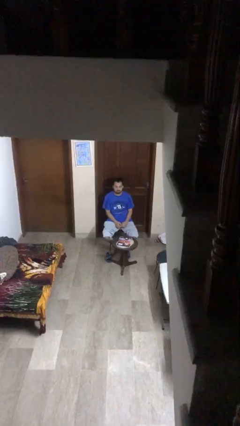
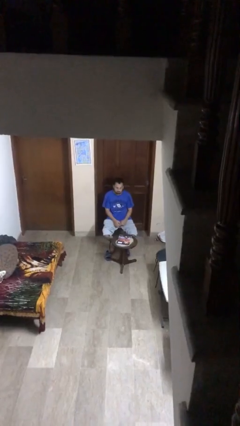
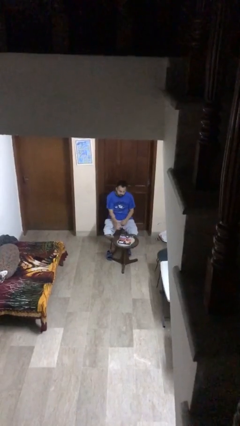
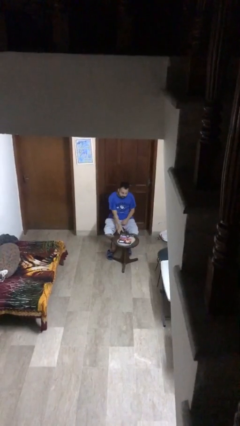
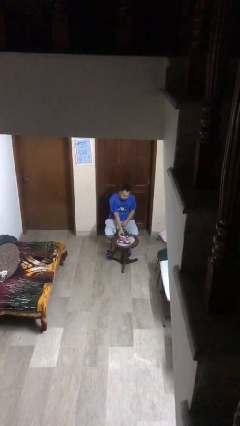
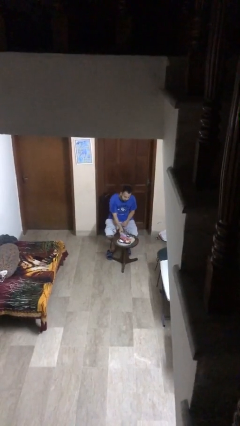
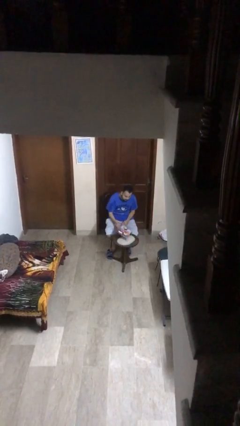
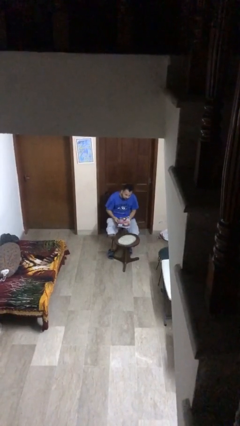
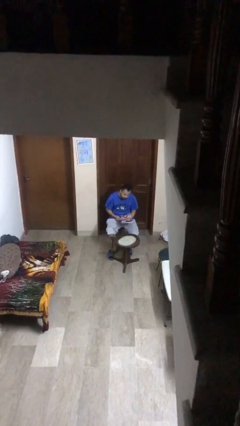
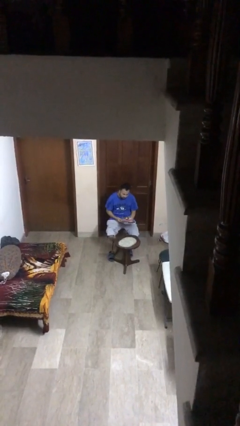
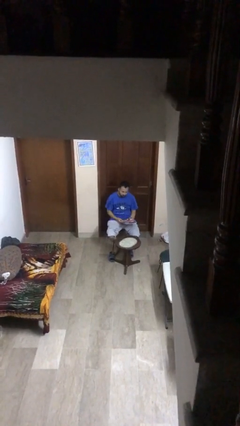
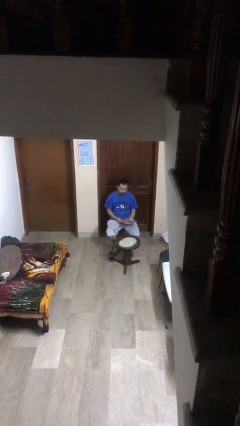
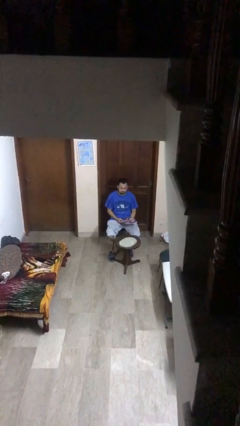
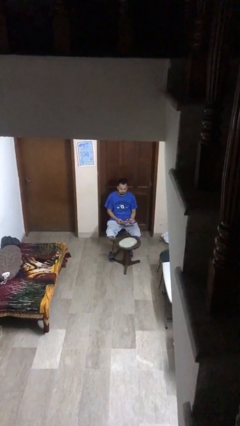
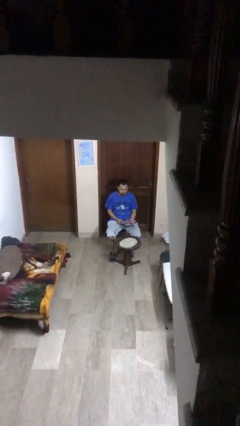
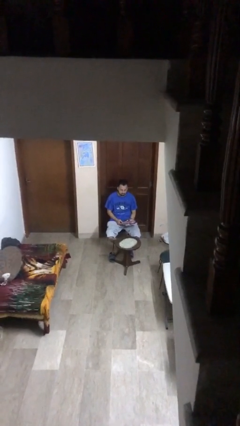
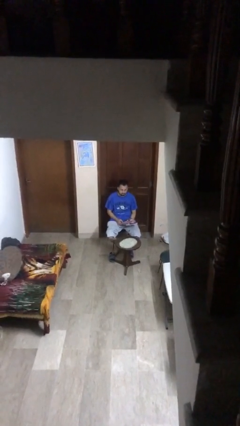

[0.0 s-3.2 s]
person picks up object from table

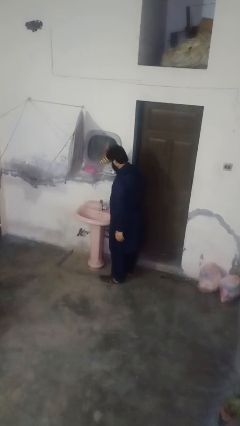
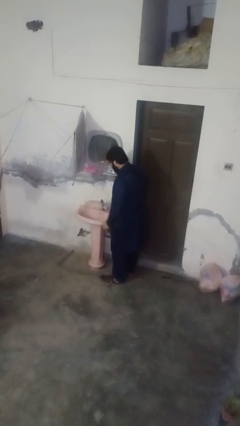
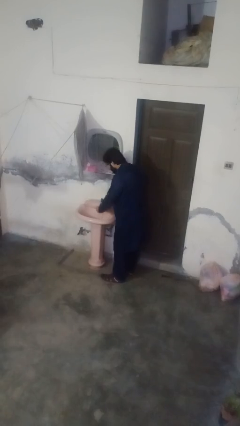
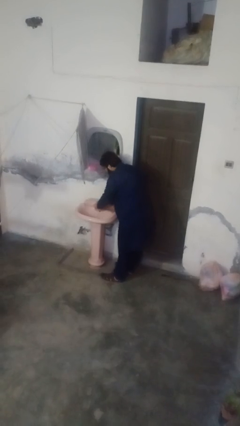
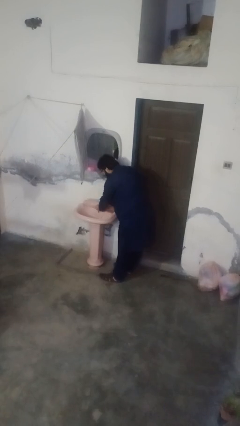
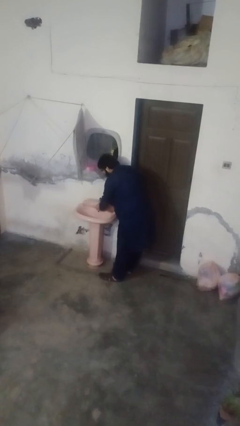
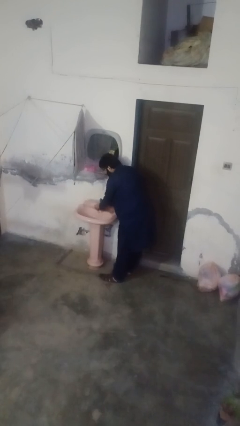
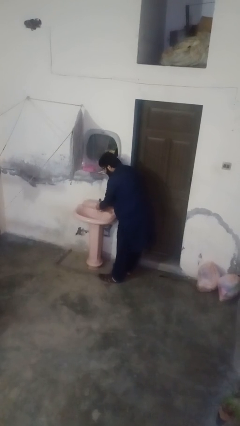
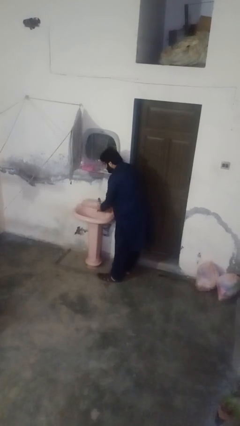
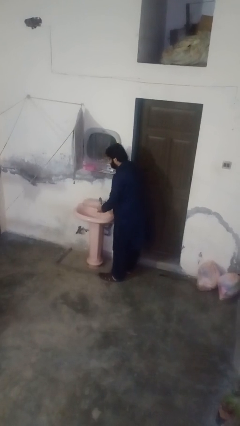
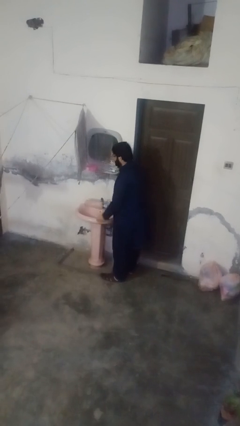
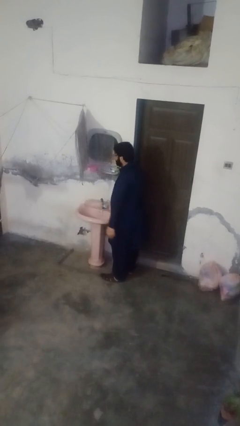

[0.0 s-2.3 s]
person washes hands

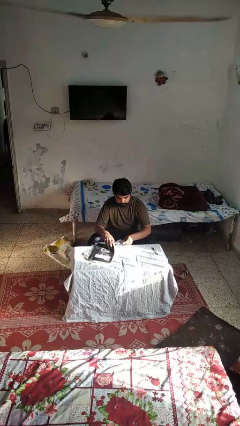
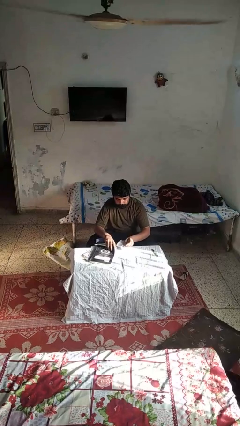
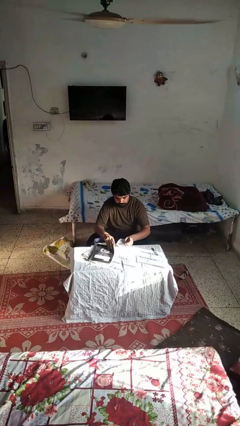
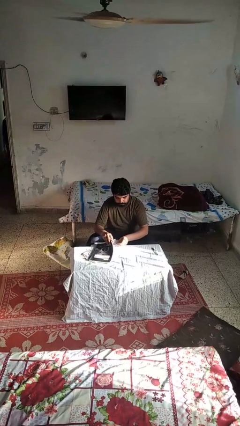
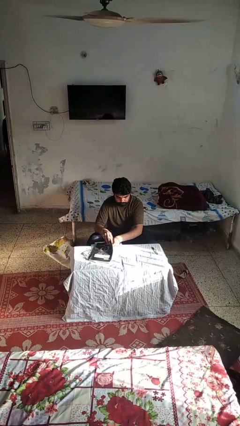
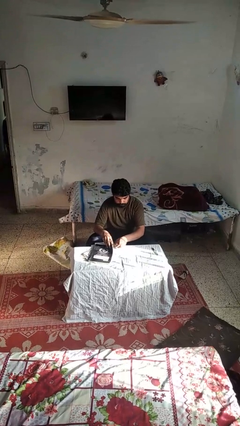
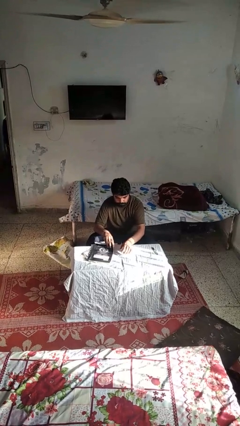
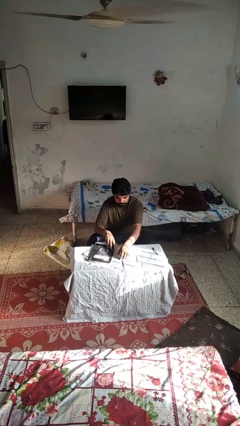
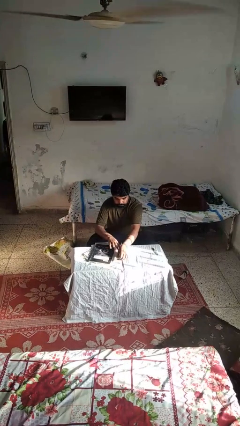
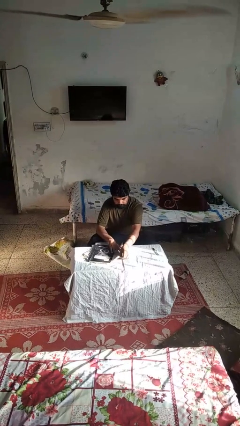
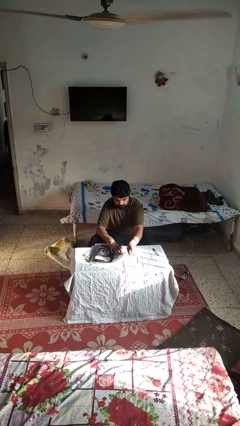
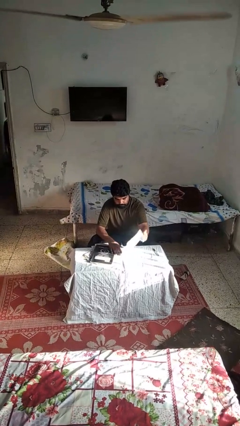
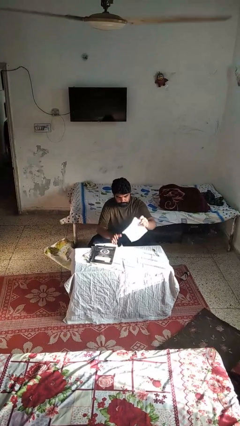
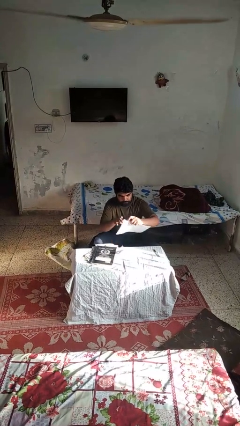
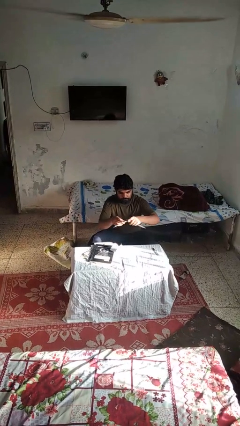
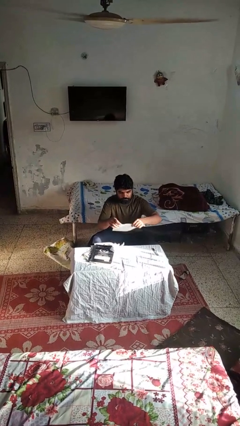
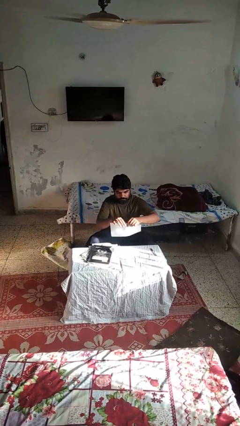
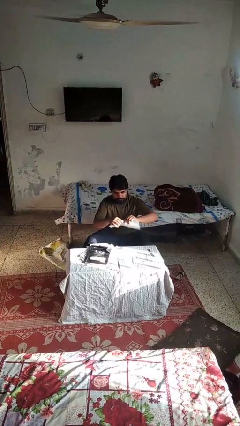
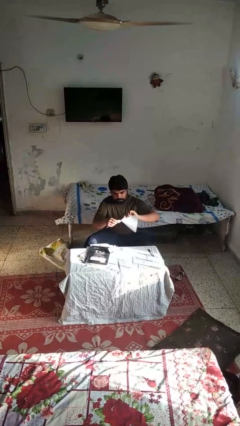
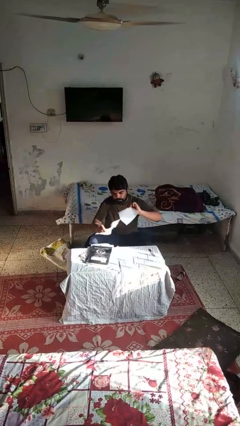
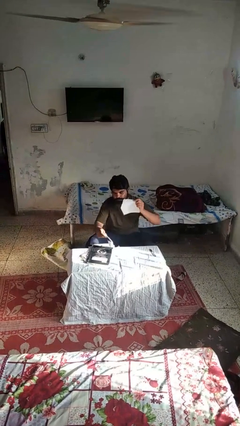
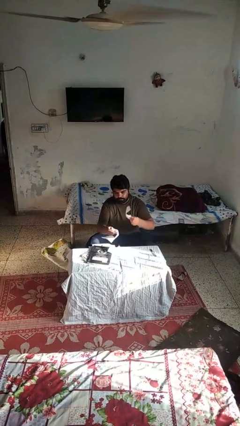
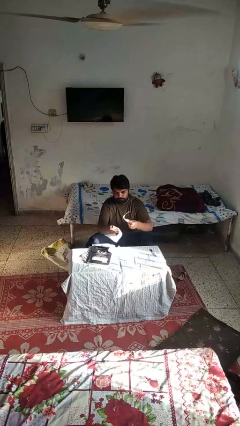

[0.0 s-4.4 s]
person tears paper

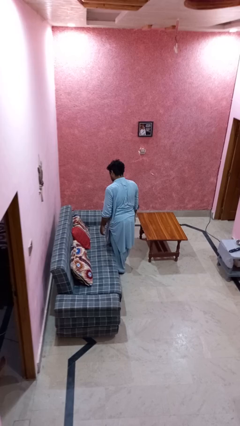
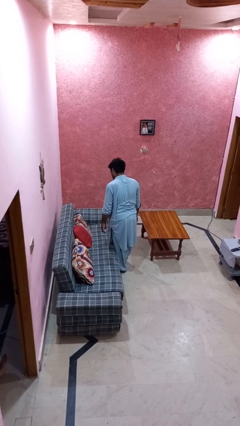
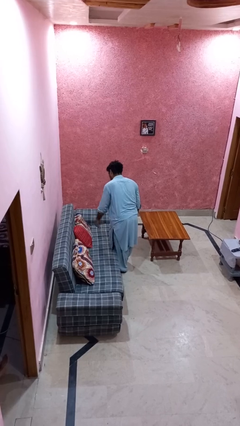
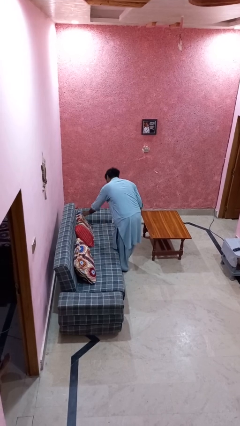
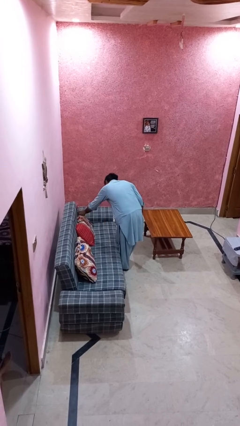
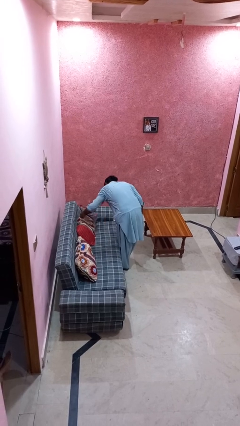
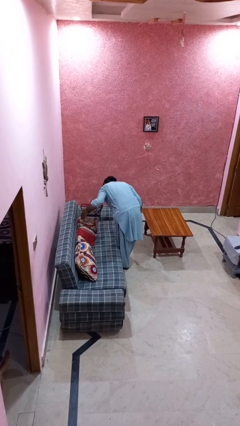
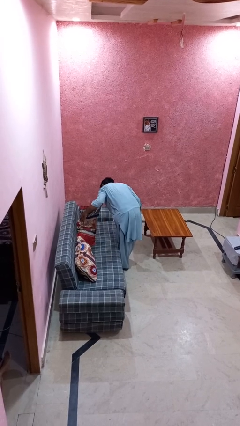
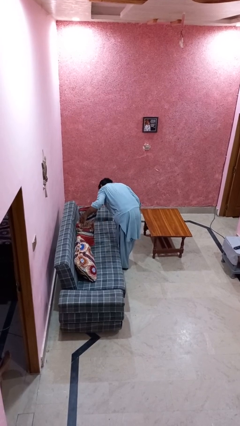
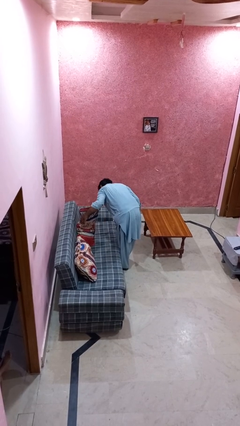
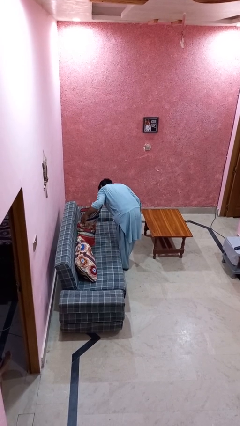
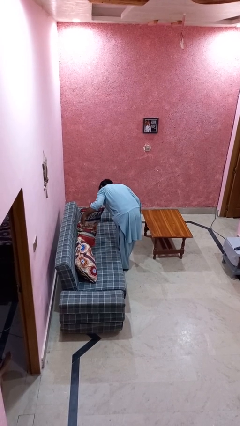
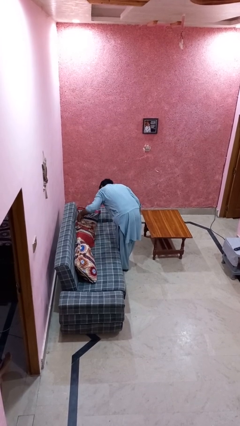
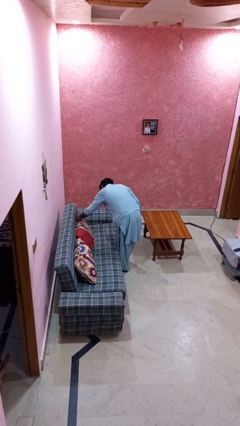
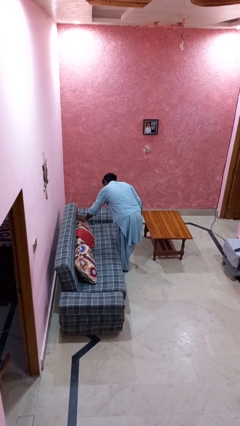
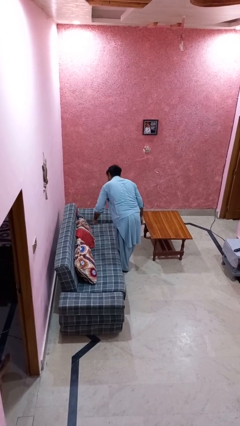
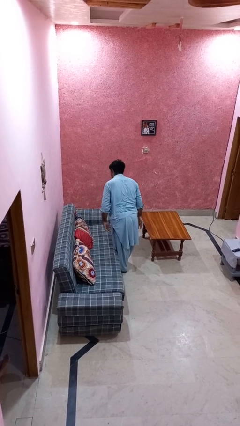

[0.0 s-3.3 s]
person searches in couch

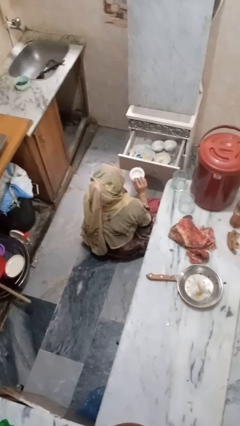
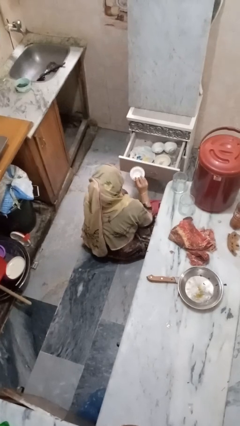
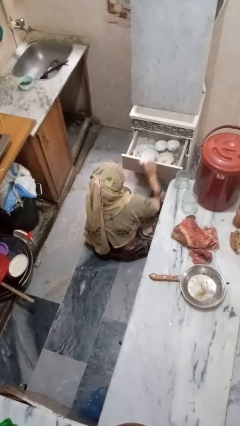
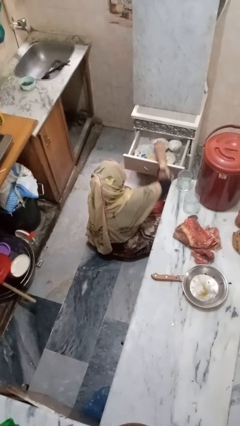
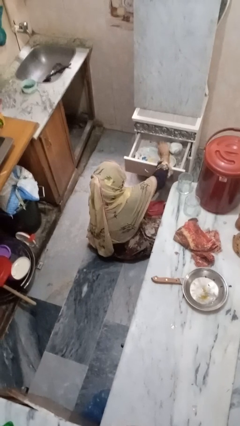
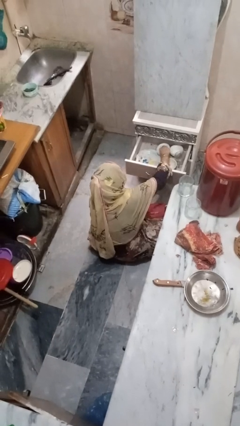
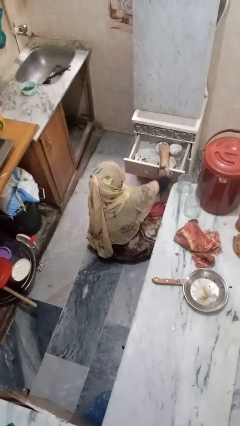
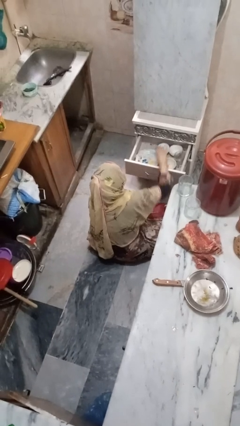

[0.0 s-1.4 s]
person puts object into kitchen drawer

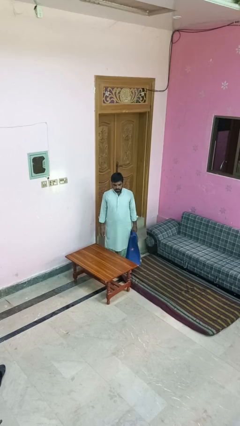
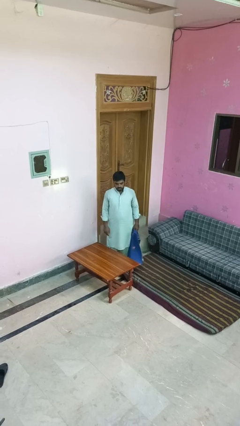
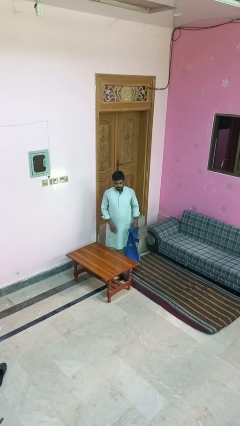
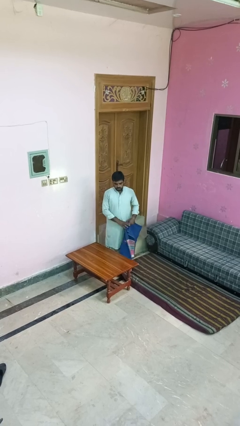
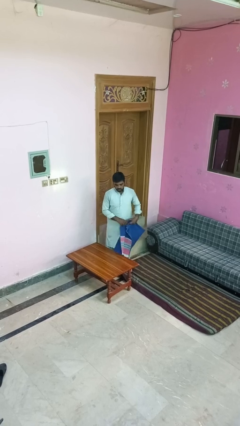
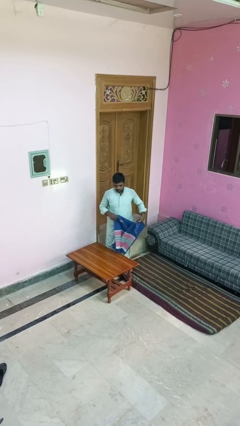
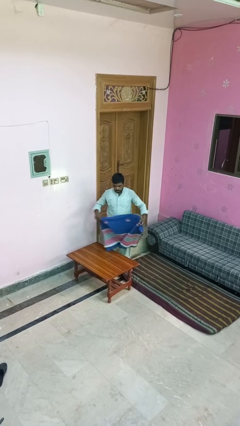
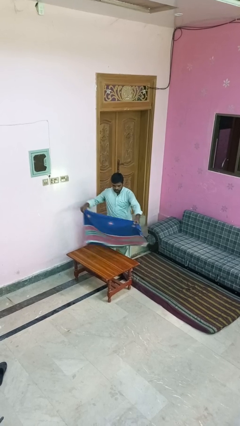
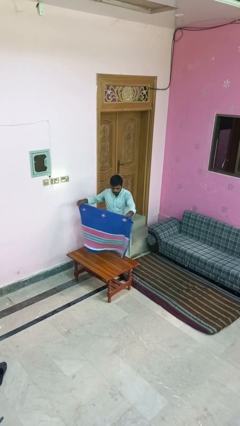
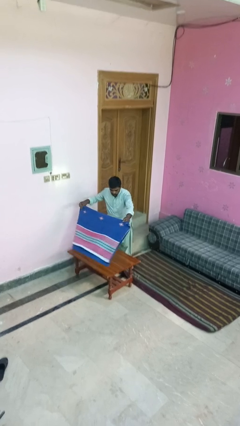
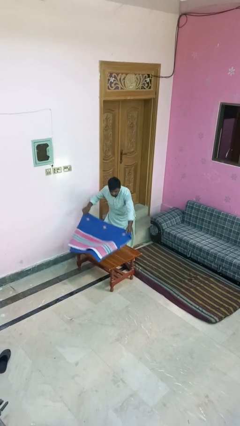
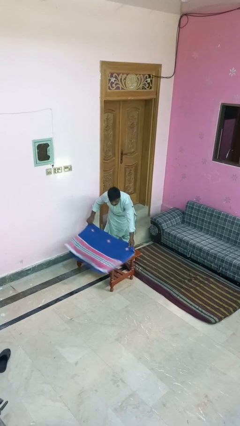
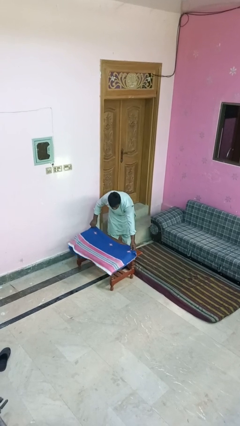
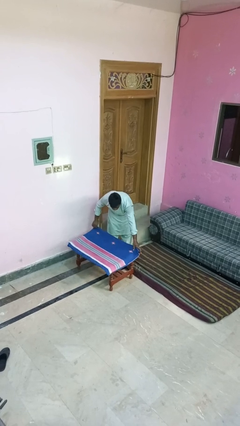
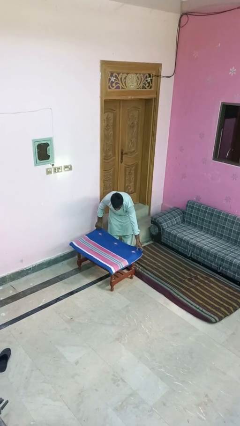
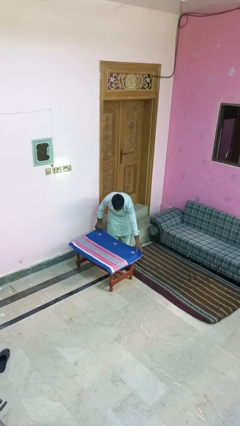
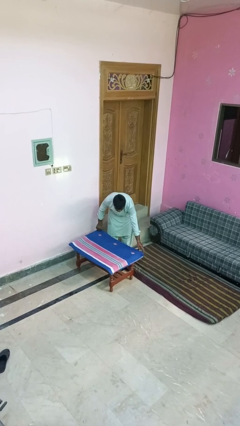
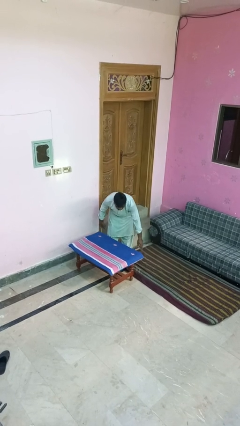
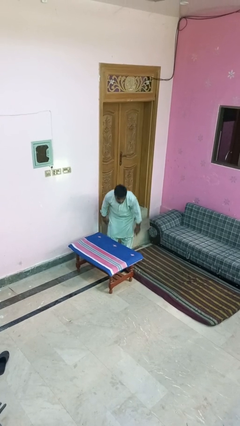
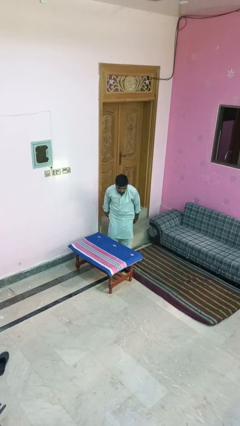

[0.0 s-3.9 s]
person spreads tablecloth
